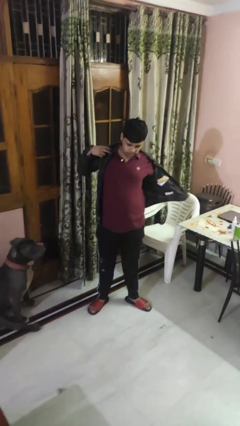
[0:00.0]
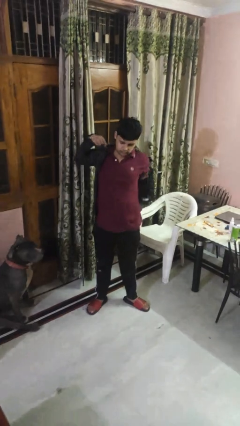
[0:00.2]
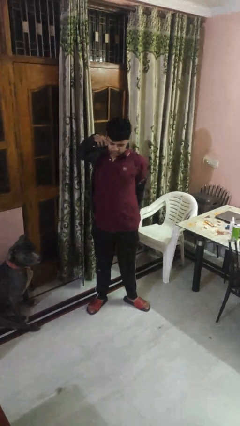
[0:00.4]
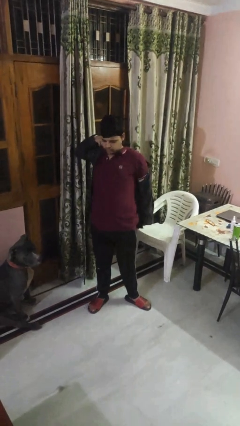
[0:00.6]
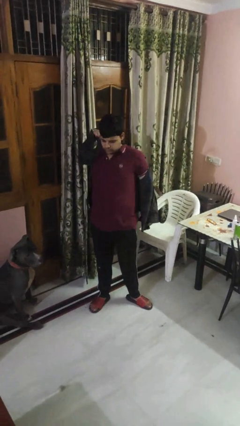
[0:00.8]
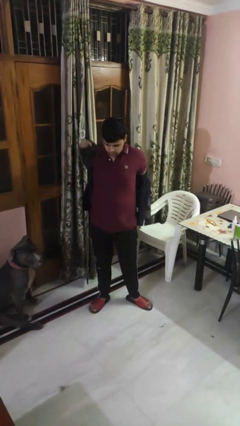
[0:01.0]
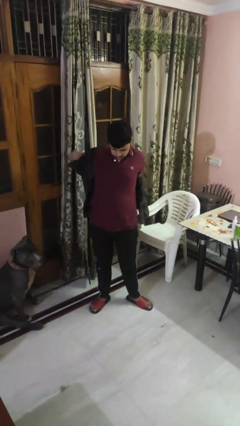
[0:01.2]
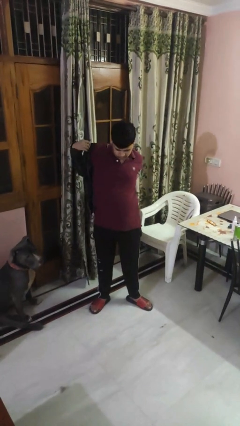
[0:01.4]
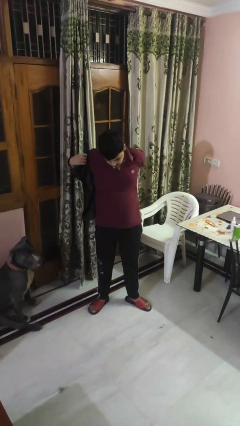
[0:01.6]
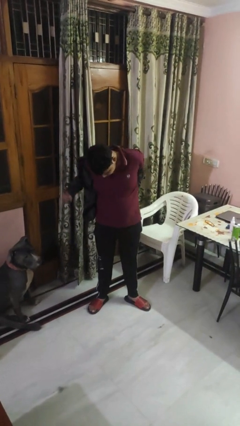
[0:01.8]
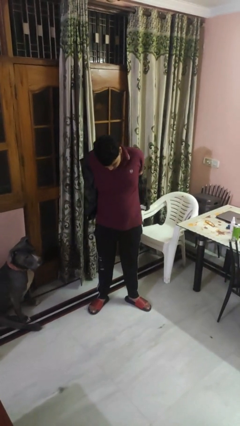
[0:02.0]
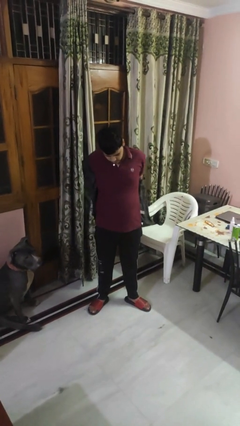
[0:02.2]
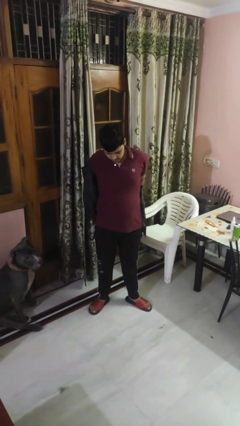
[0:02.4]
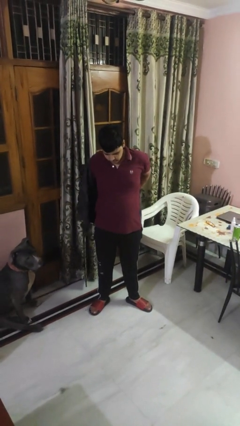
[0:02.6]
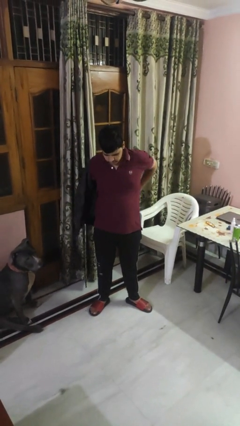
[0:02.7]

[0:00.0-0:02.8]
person takes off shirt

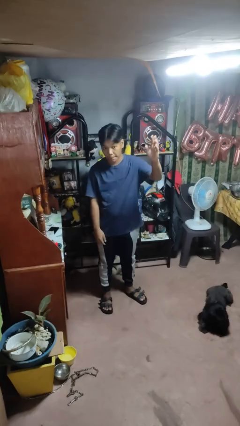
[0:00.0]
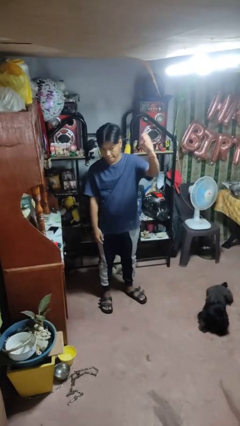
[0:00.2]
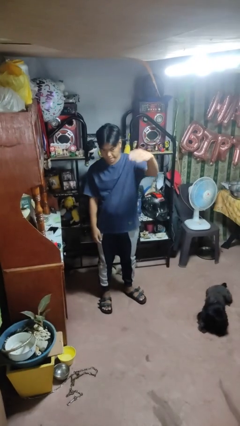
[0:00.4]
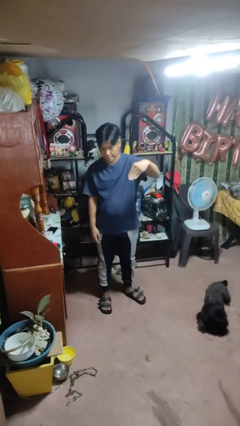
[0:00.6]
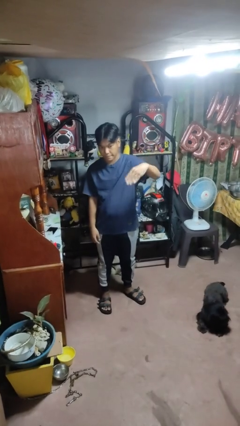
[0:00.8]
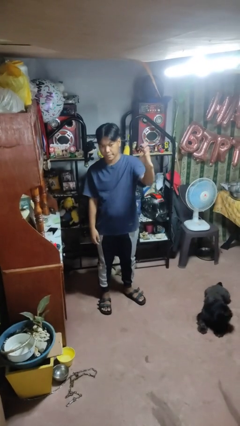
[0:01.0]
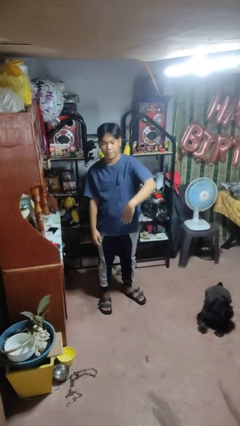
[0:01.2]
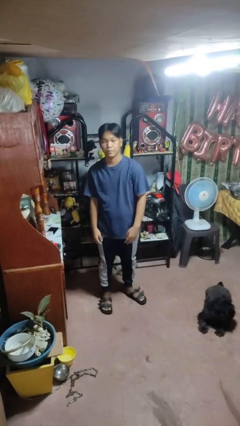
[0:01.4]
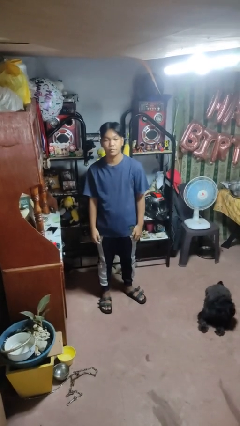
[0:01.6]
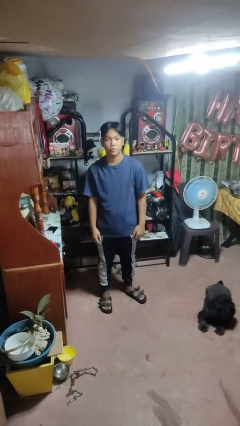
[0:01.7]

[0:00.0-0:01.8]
person gestures come here

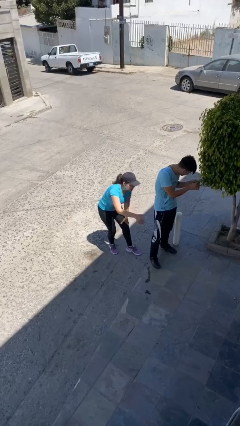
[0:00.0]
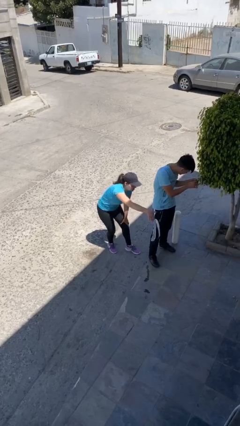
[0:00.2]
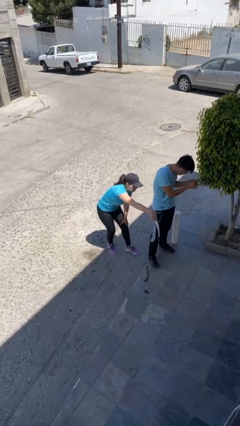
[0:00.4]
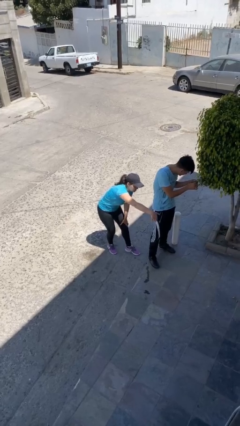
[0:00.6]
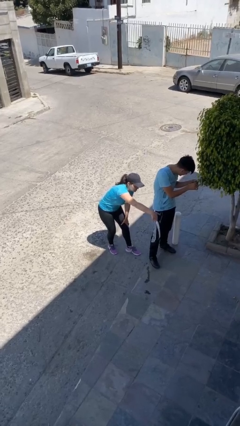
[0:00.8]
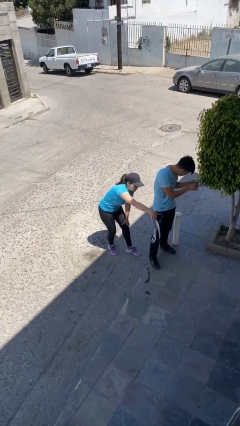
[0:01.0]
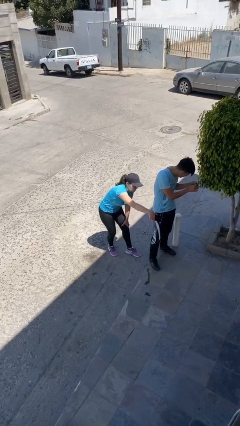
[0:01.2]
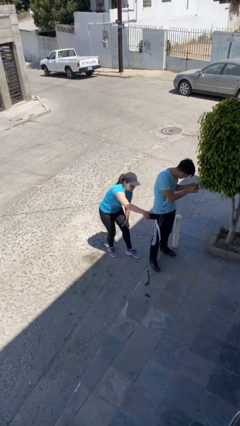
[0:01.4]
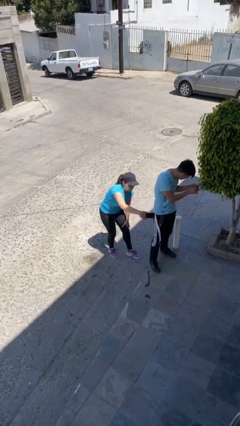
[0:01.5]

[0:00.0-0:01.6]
person steals object from person

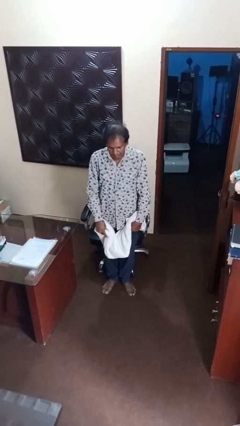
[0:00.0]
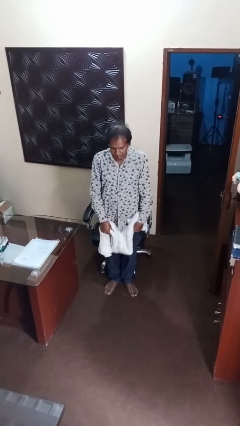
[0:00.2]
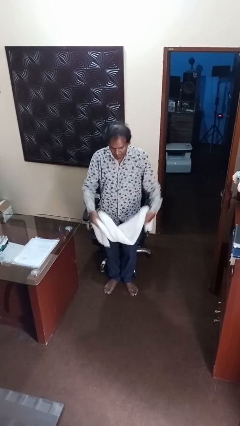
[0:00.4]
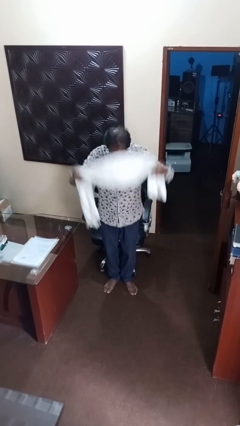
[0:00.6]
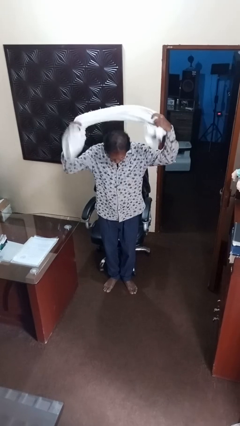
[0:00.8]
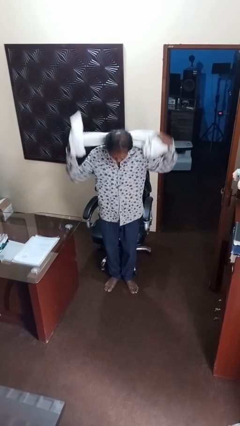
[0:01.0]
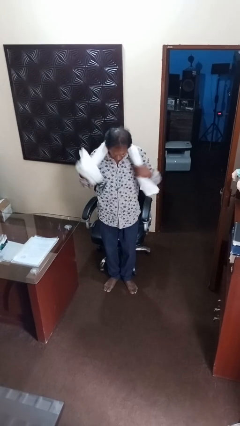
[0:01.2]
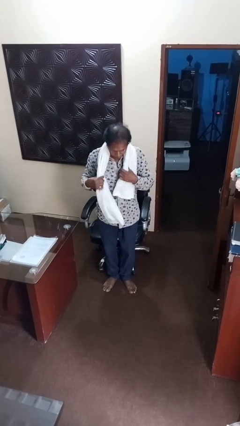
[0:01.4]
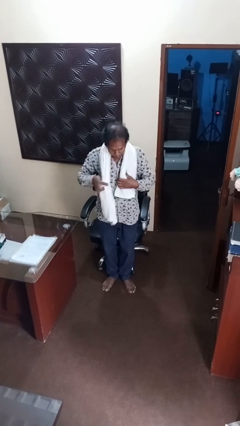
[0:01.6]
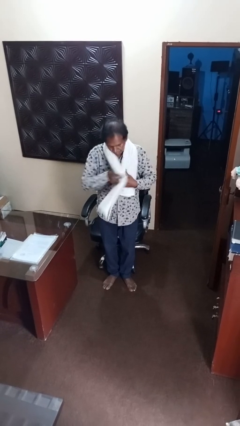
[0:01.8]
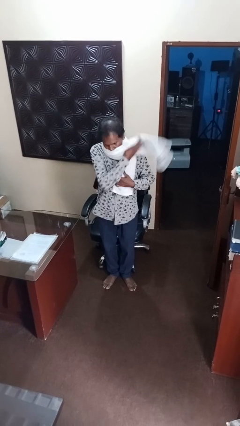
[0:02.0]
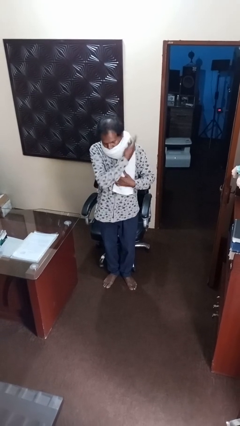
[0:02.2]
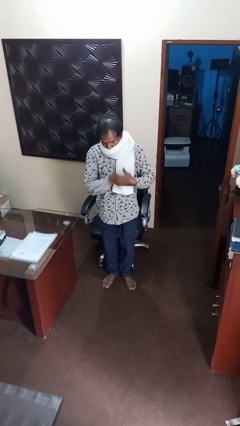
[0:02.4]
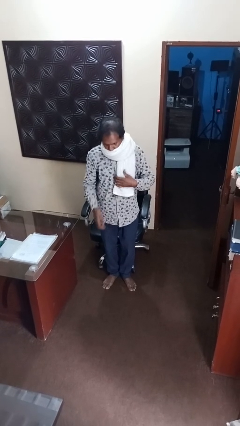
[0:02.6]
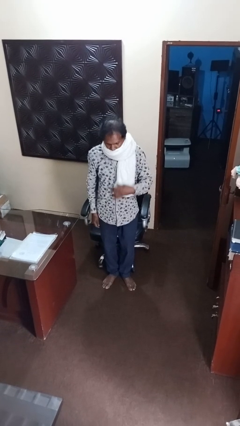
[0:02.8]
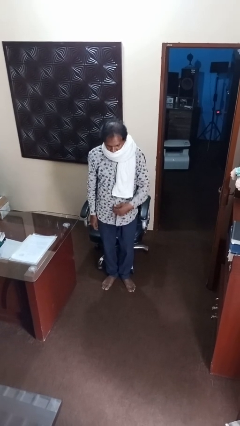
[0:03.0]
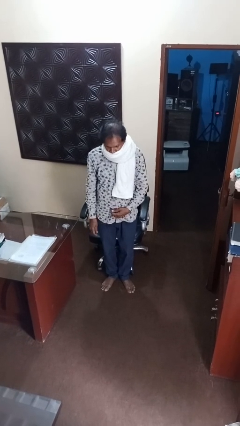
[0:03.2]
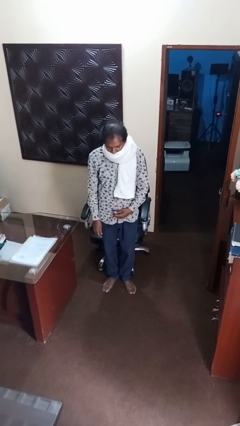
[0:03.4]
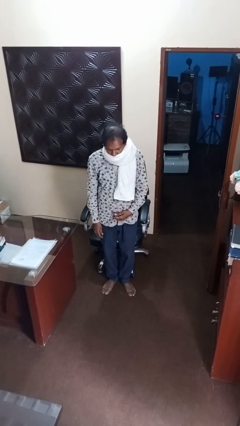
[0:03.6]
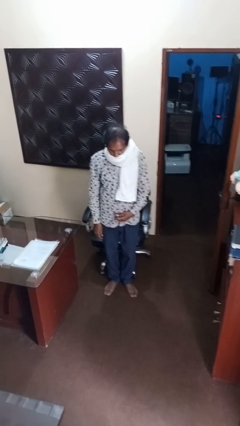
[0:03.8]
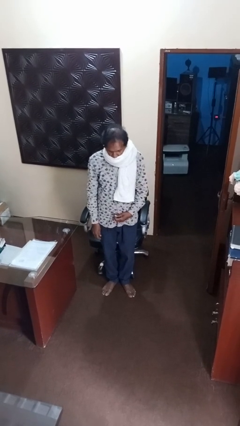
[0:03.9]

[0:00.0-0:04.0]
person puts on scarf

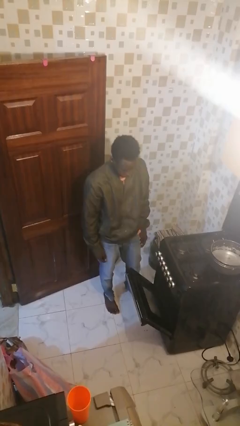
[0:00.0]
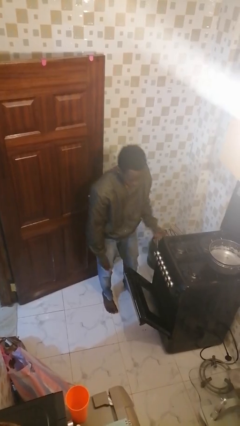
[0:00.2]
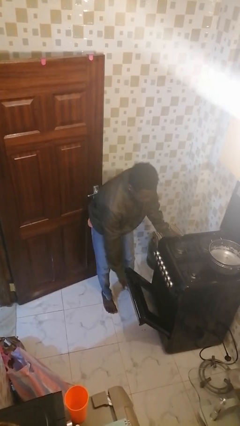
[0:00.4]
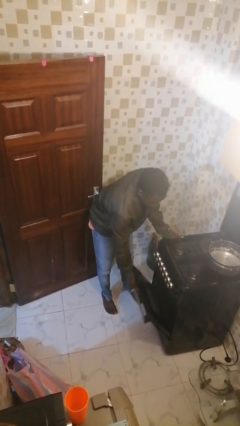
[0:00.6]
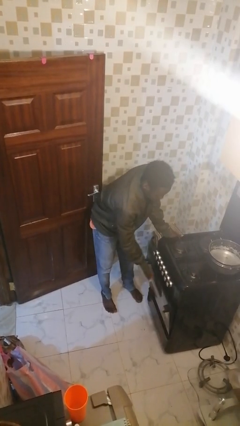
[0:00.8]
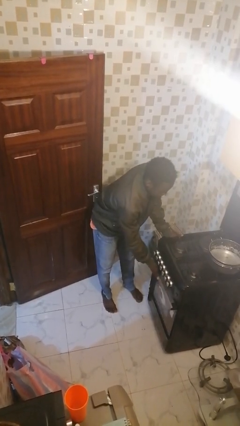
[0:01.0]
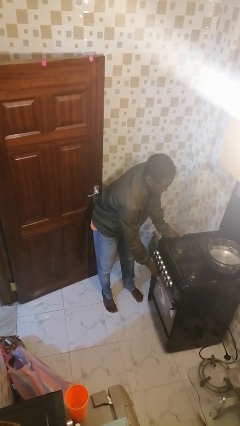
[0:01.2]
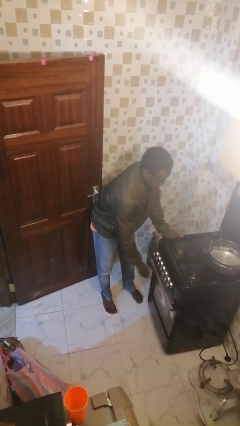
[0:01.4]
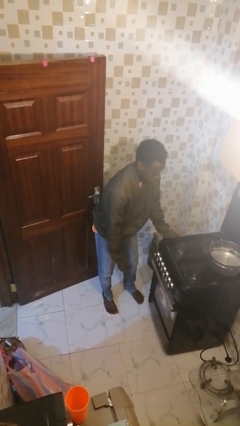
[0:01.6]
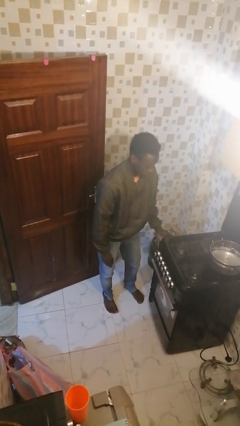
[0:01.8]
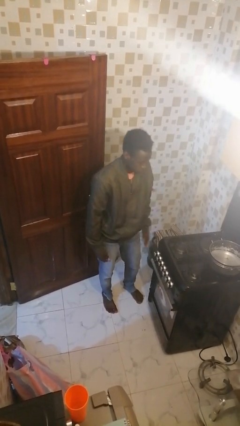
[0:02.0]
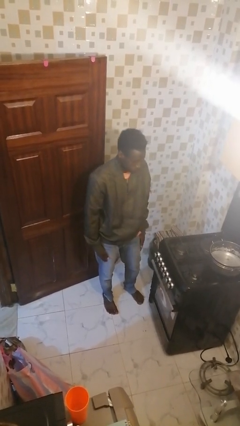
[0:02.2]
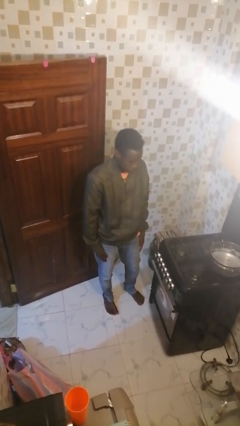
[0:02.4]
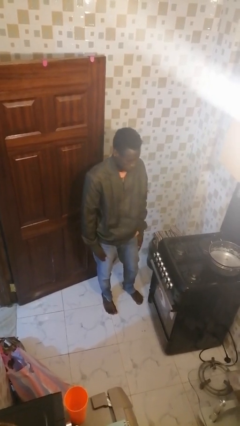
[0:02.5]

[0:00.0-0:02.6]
person closes oven door

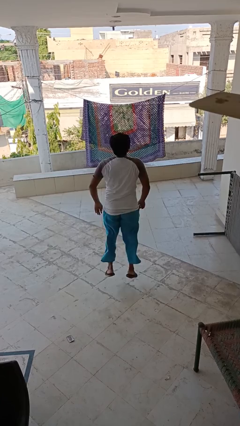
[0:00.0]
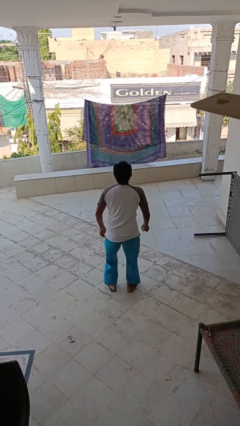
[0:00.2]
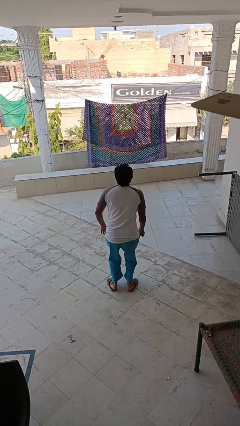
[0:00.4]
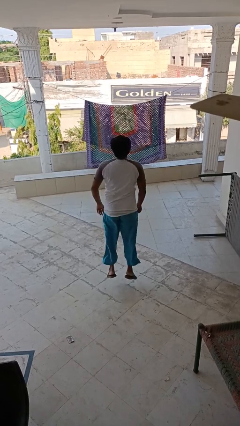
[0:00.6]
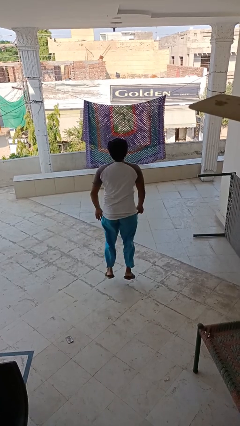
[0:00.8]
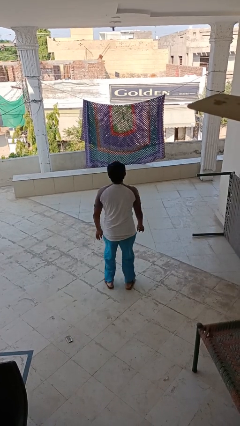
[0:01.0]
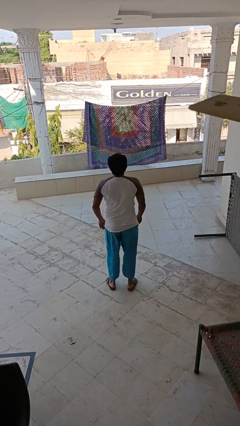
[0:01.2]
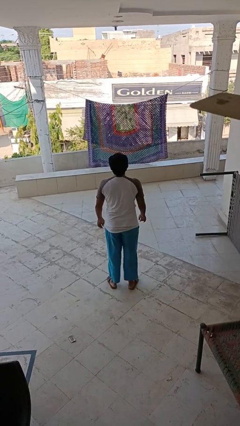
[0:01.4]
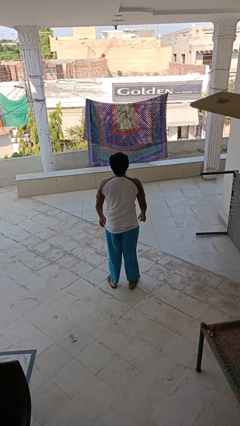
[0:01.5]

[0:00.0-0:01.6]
person jumps

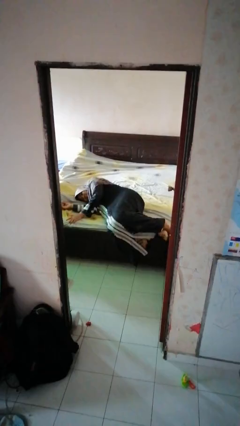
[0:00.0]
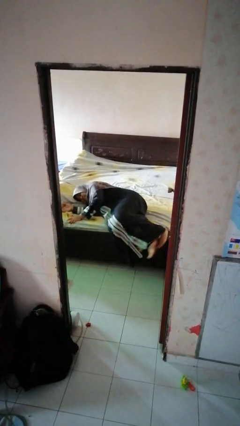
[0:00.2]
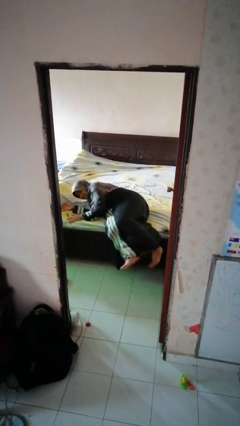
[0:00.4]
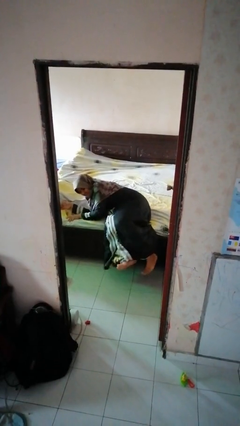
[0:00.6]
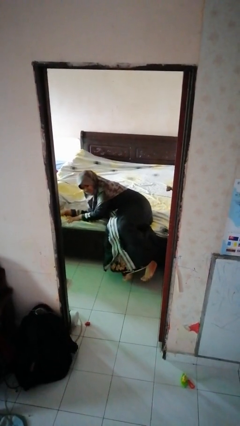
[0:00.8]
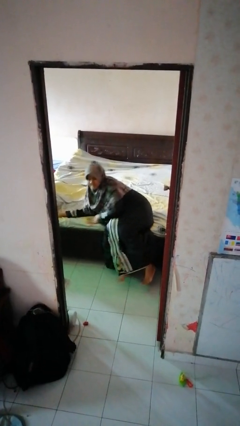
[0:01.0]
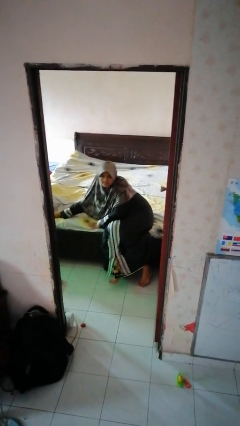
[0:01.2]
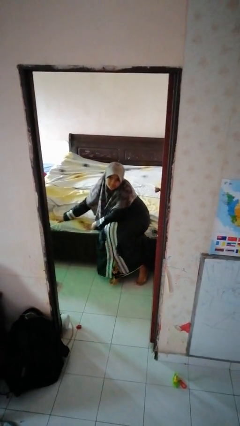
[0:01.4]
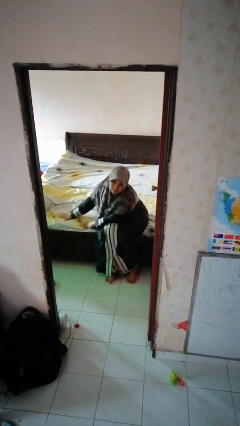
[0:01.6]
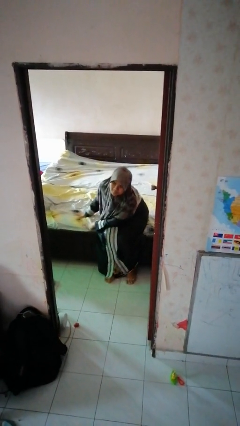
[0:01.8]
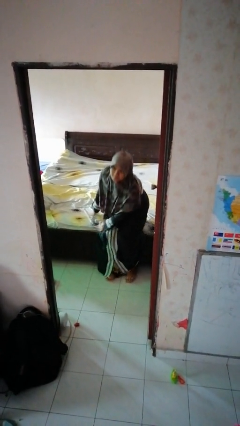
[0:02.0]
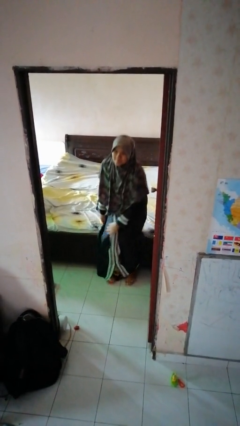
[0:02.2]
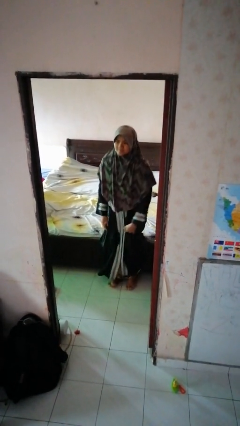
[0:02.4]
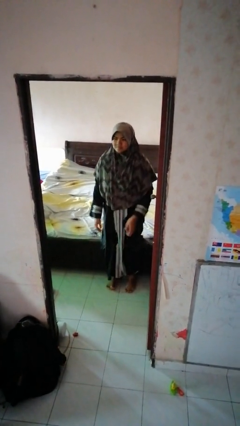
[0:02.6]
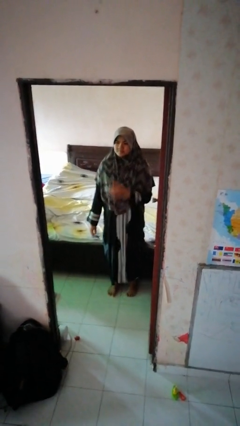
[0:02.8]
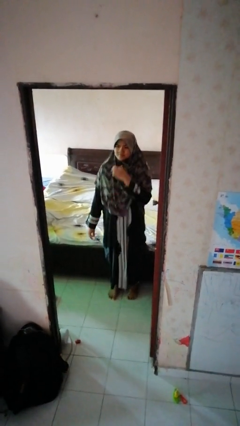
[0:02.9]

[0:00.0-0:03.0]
person stands up
